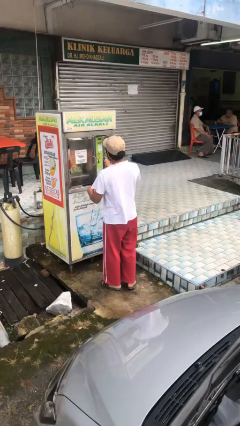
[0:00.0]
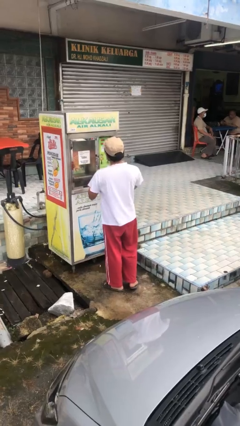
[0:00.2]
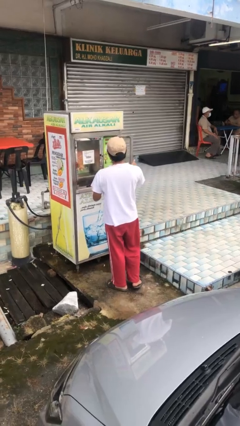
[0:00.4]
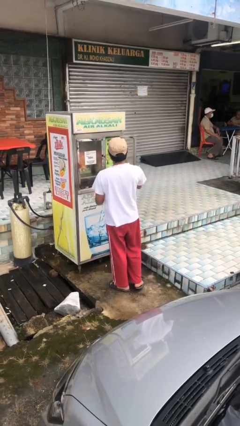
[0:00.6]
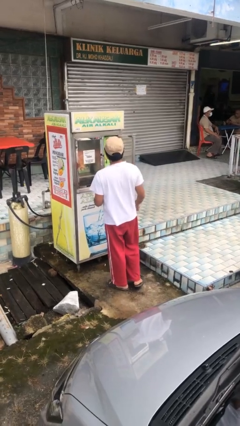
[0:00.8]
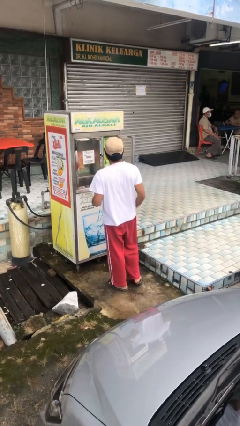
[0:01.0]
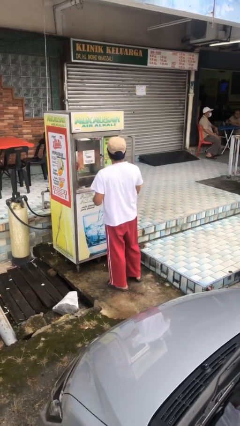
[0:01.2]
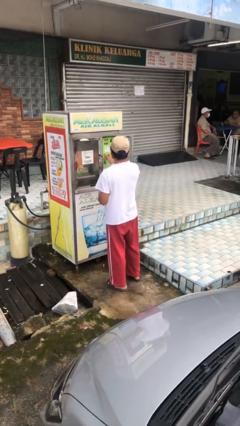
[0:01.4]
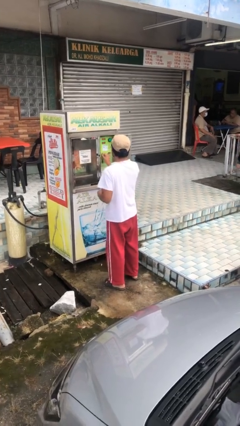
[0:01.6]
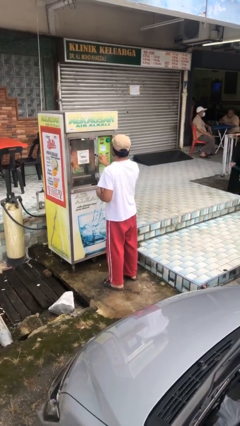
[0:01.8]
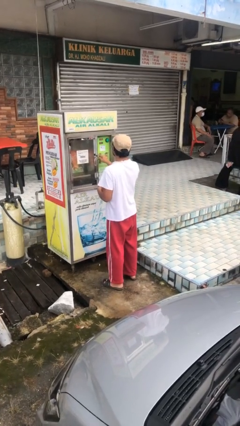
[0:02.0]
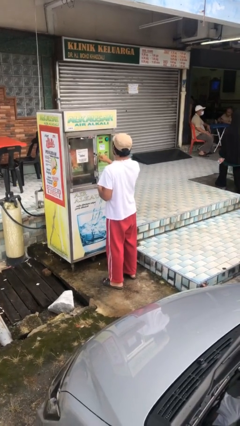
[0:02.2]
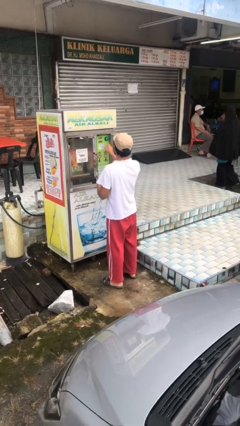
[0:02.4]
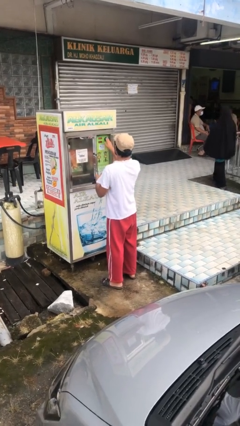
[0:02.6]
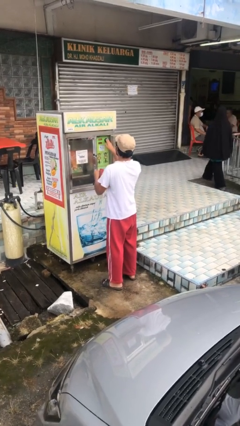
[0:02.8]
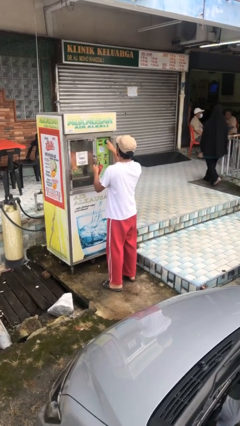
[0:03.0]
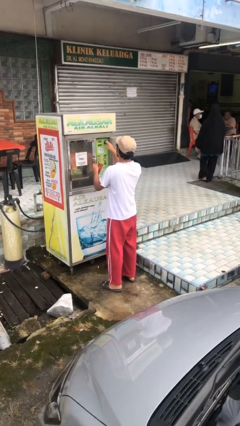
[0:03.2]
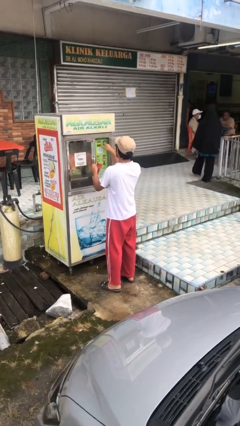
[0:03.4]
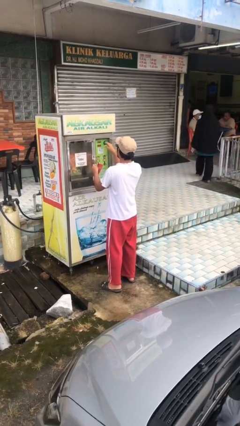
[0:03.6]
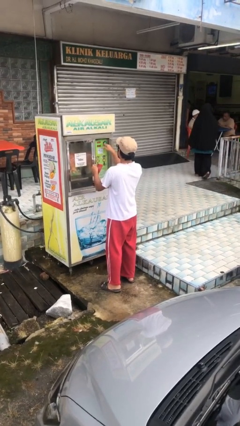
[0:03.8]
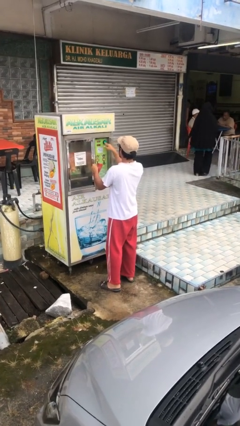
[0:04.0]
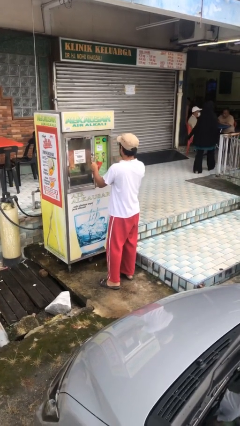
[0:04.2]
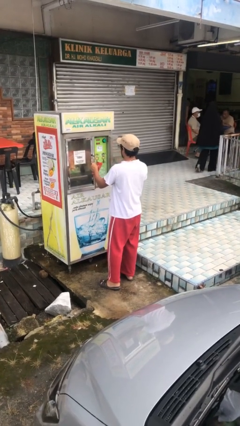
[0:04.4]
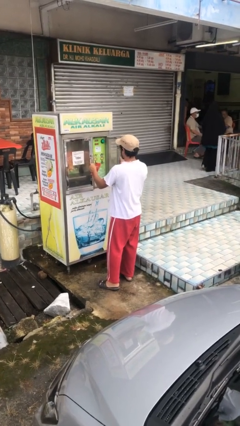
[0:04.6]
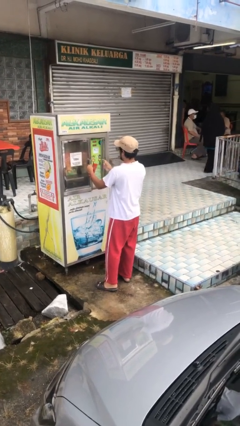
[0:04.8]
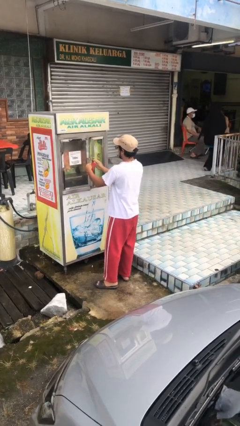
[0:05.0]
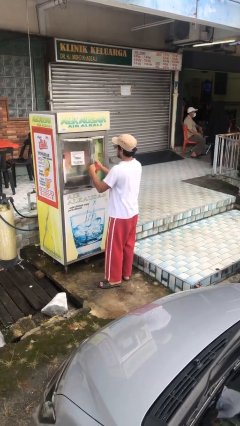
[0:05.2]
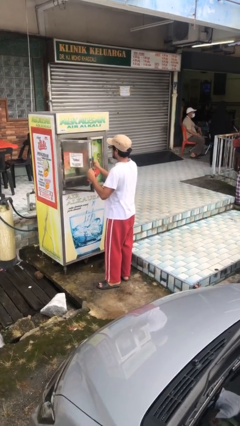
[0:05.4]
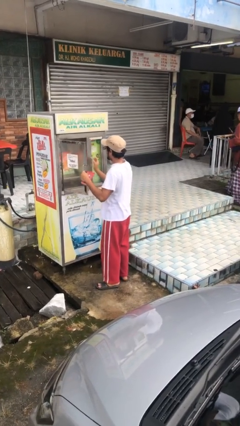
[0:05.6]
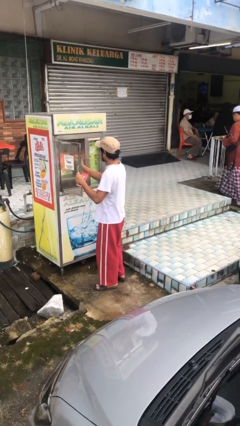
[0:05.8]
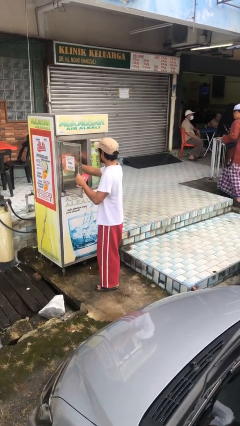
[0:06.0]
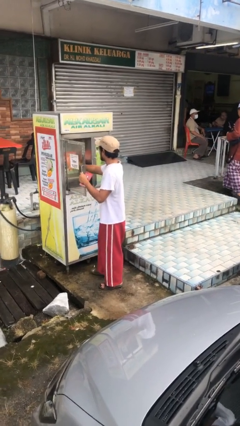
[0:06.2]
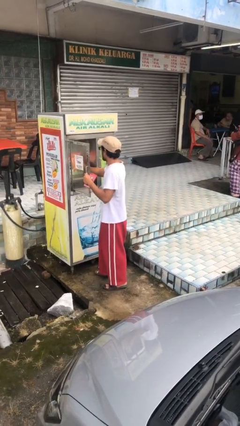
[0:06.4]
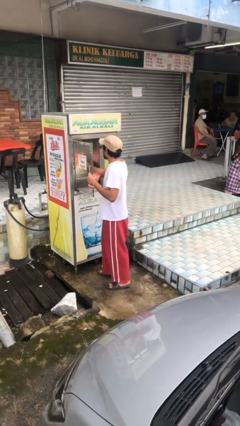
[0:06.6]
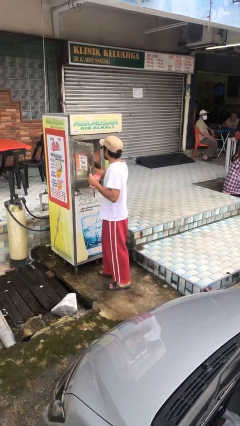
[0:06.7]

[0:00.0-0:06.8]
person purchases from machine

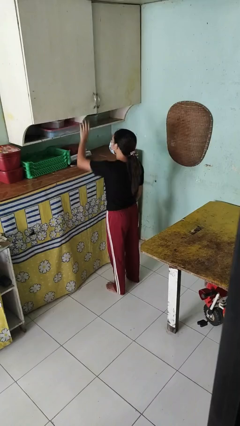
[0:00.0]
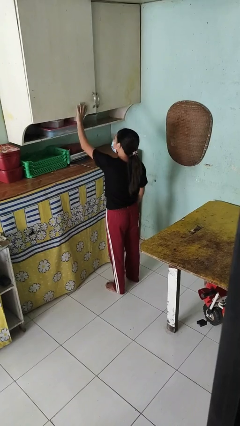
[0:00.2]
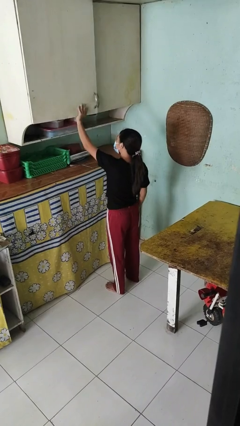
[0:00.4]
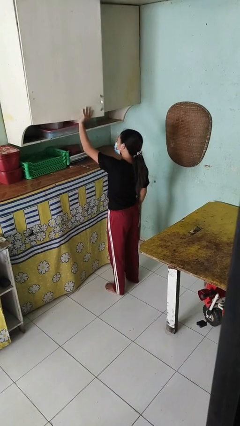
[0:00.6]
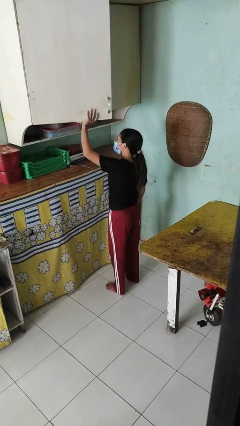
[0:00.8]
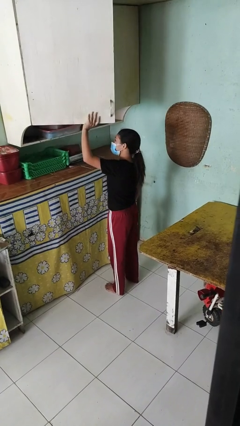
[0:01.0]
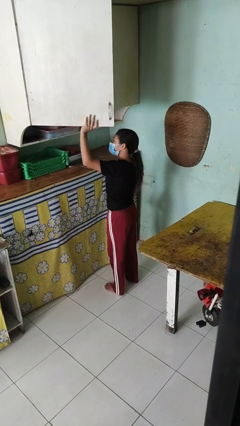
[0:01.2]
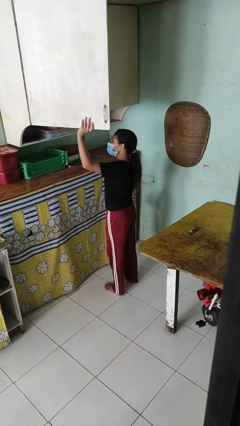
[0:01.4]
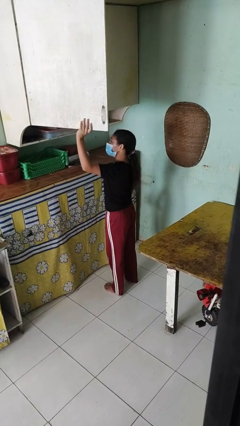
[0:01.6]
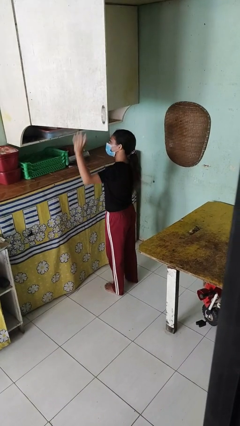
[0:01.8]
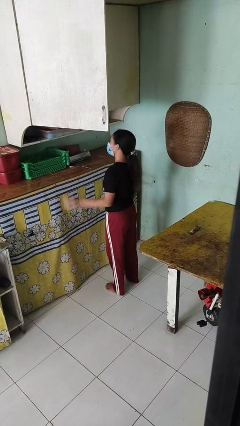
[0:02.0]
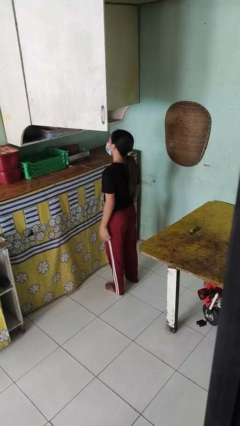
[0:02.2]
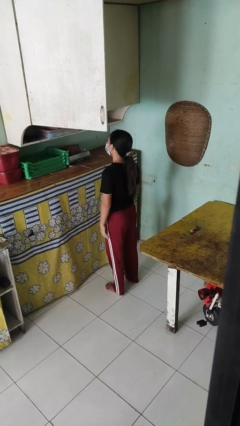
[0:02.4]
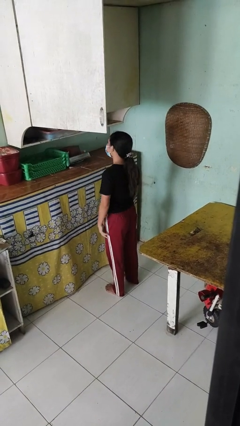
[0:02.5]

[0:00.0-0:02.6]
person opens cabinet

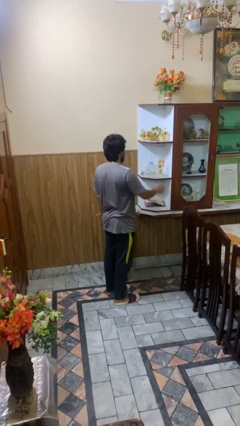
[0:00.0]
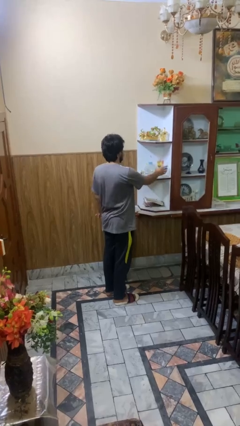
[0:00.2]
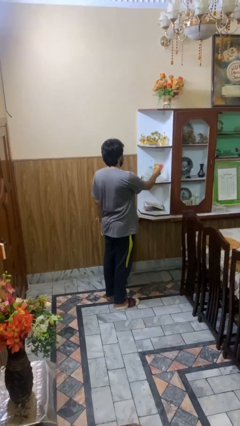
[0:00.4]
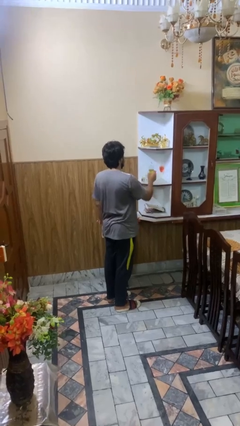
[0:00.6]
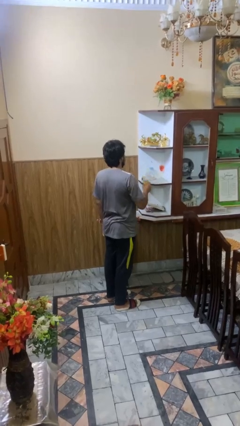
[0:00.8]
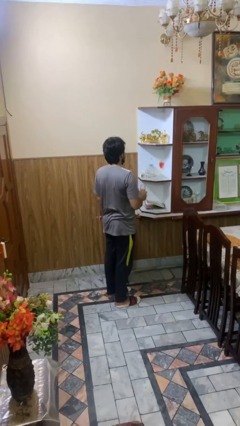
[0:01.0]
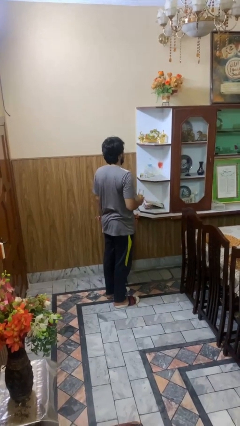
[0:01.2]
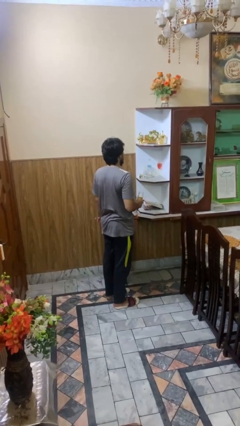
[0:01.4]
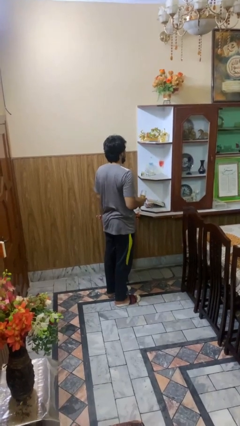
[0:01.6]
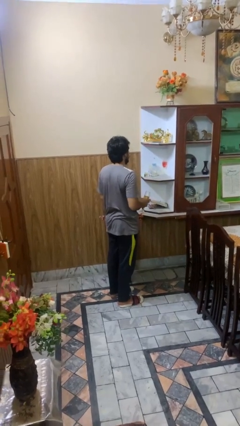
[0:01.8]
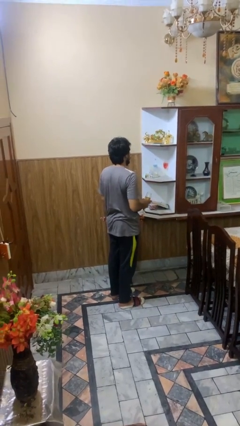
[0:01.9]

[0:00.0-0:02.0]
person picks up object from cabinet

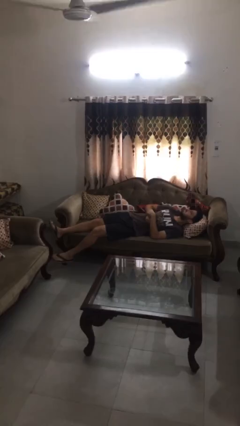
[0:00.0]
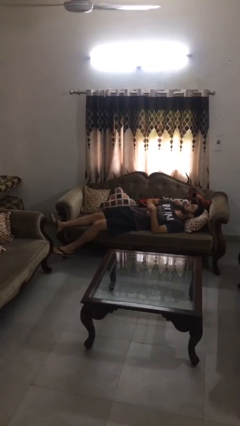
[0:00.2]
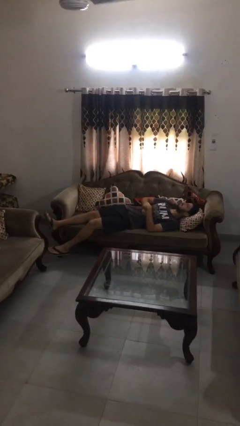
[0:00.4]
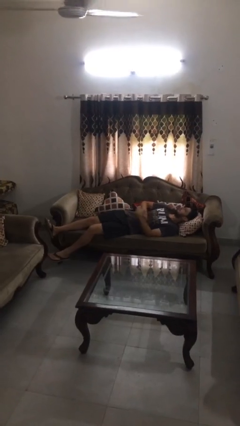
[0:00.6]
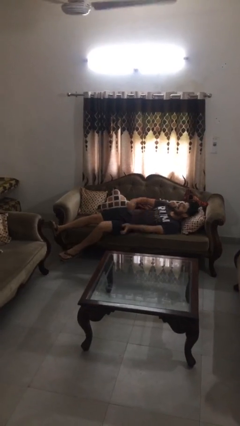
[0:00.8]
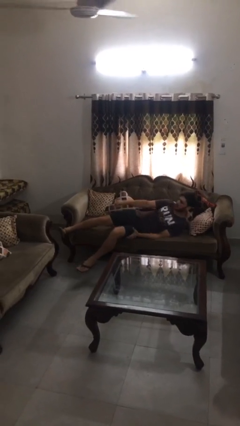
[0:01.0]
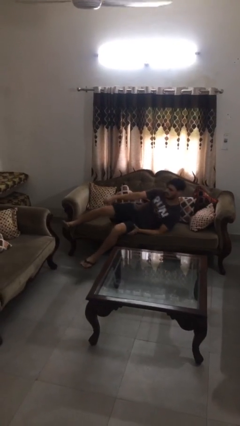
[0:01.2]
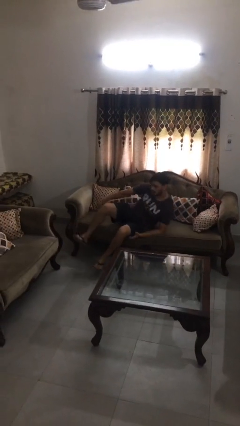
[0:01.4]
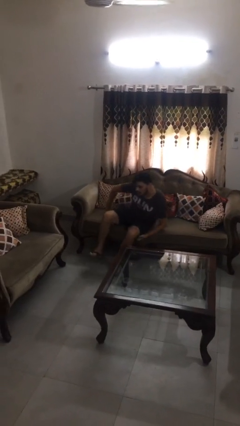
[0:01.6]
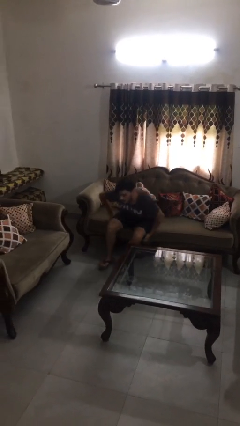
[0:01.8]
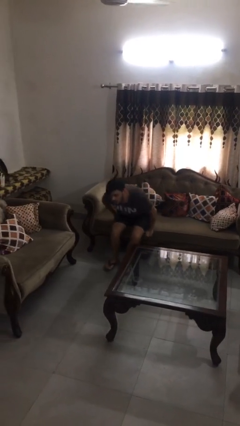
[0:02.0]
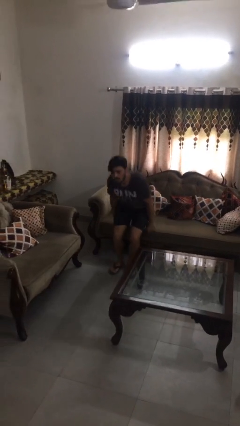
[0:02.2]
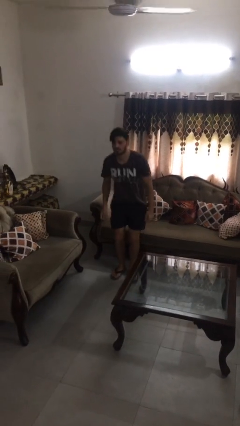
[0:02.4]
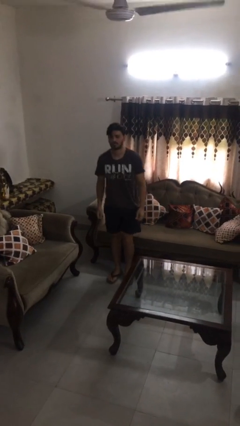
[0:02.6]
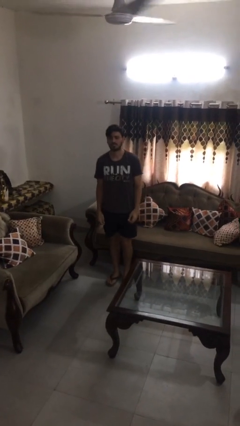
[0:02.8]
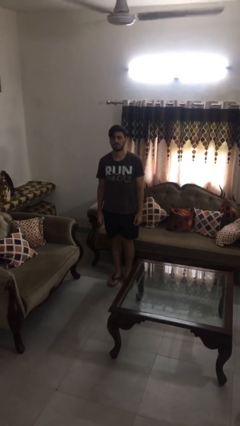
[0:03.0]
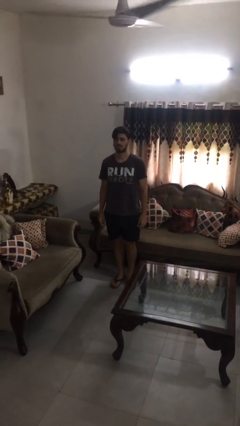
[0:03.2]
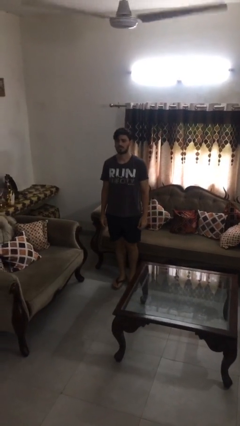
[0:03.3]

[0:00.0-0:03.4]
person stands up

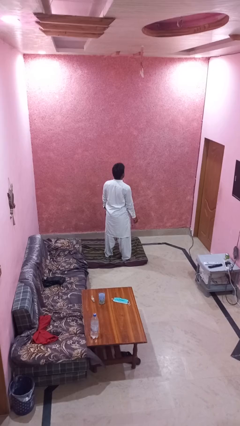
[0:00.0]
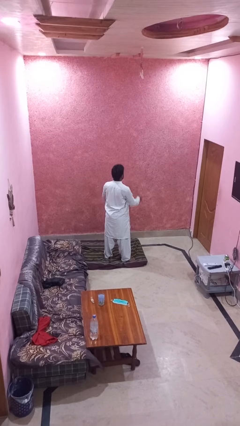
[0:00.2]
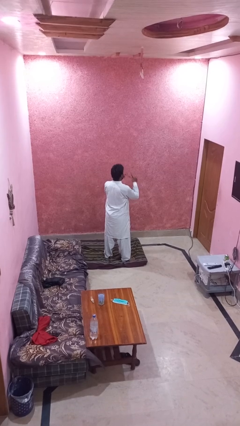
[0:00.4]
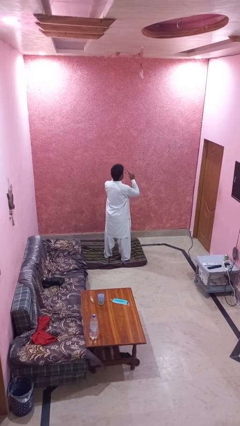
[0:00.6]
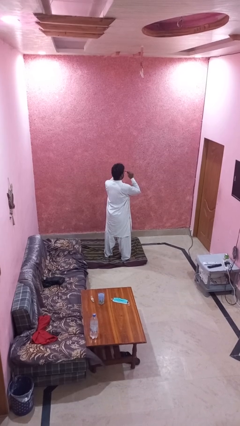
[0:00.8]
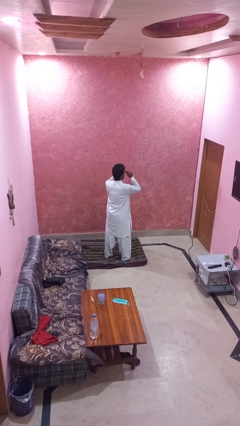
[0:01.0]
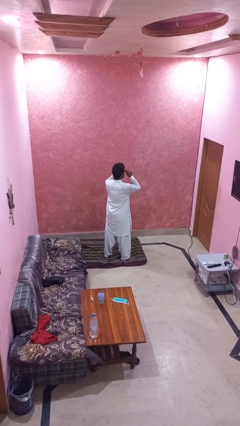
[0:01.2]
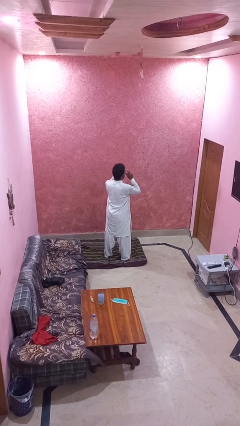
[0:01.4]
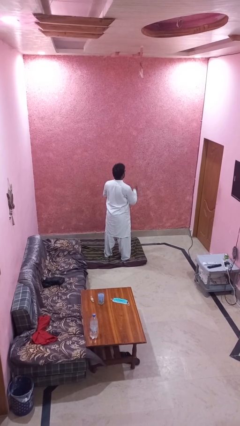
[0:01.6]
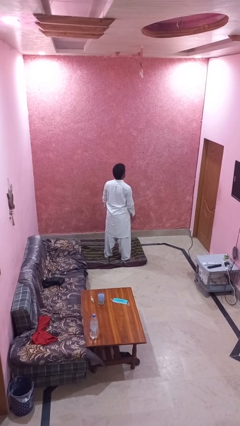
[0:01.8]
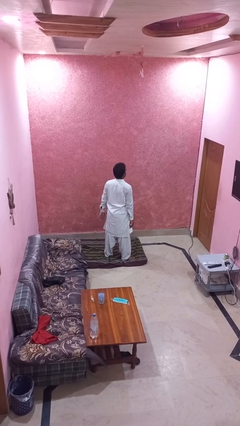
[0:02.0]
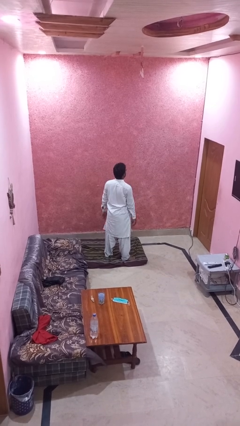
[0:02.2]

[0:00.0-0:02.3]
person puts on glasses

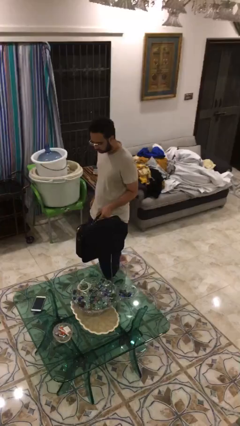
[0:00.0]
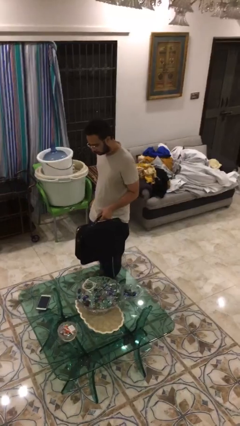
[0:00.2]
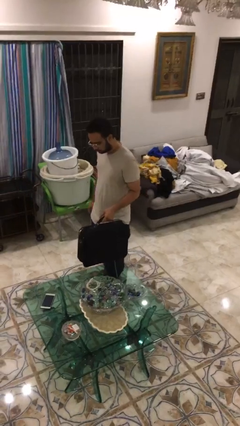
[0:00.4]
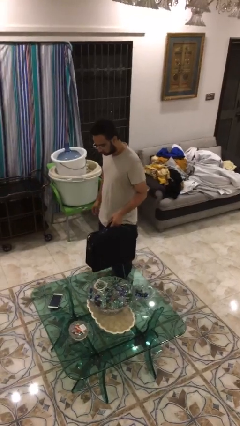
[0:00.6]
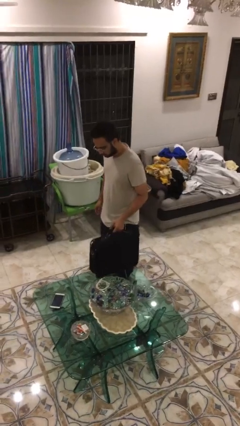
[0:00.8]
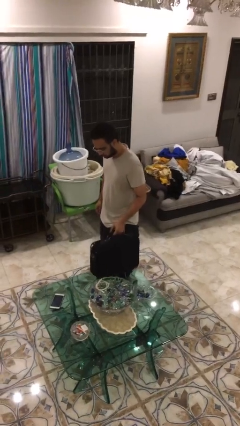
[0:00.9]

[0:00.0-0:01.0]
person puts down object on table
